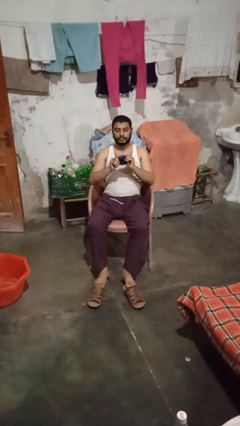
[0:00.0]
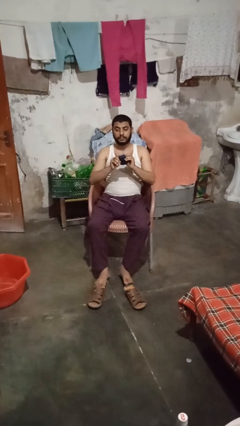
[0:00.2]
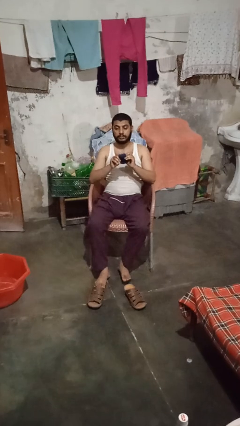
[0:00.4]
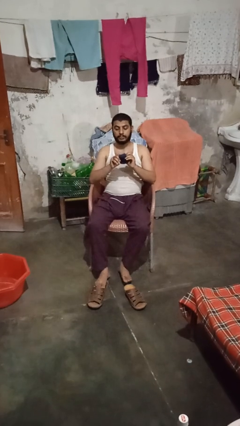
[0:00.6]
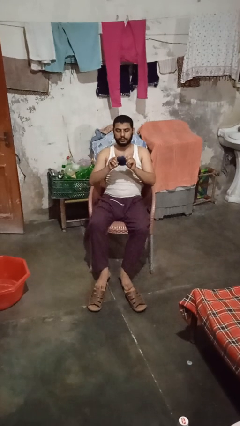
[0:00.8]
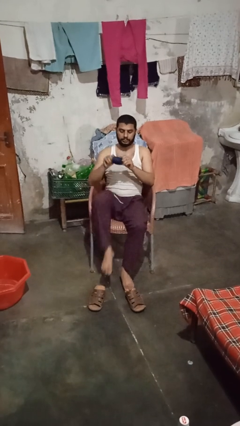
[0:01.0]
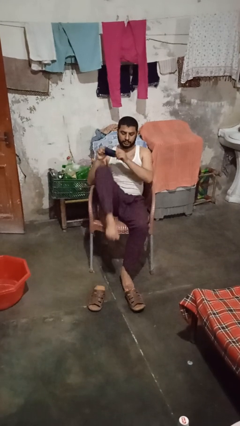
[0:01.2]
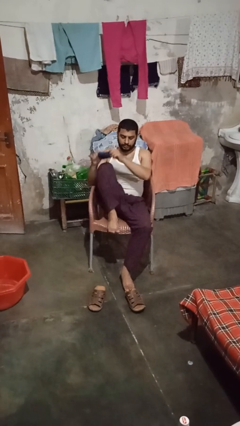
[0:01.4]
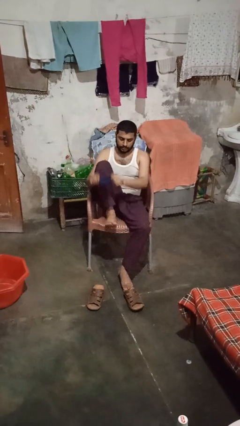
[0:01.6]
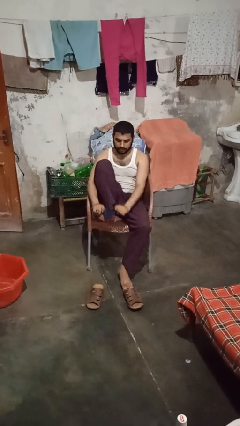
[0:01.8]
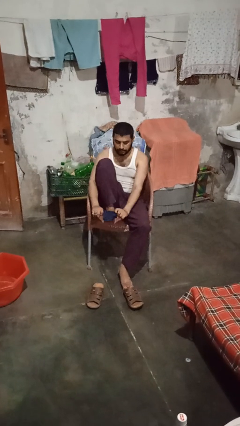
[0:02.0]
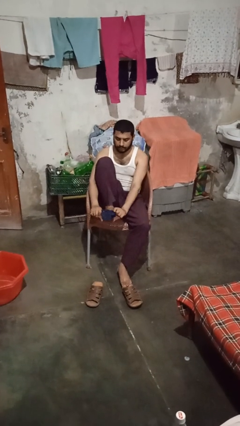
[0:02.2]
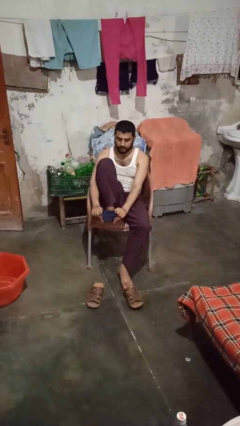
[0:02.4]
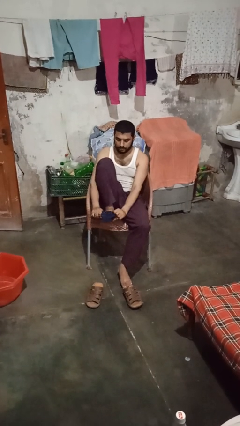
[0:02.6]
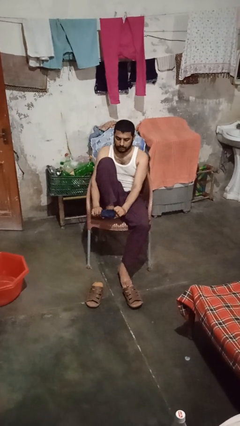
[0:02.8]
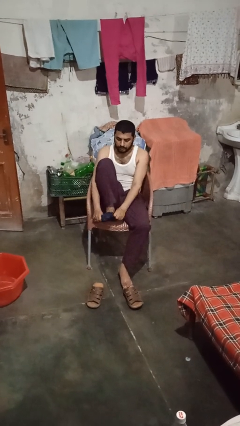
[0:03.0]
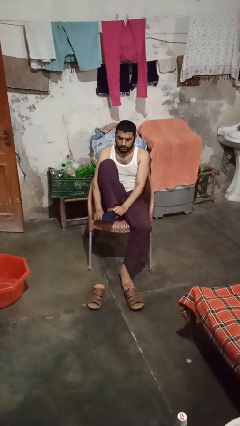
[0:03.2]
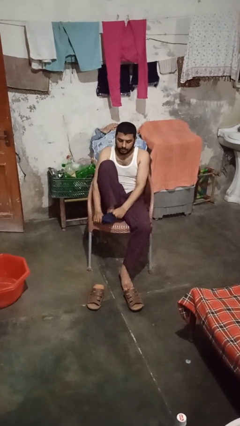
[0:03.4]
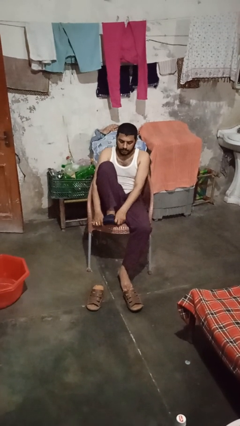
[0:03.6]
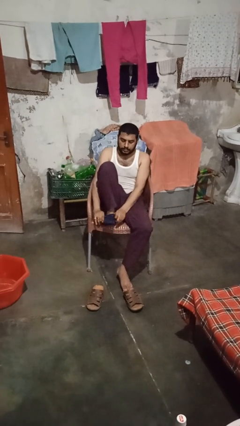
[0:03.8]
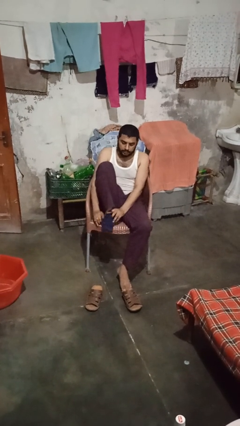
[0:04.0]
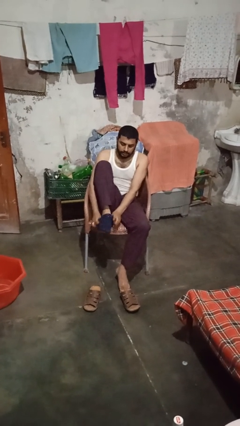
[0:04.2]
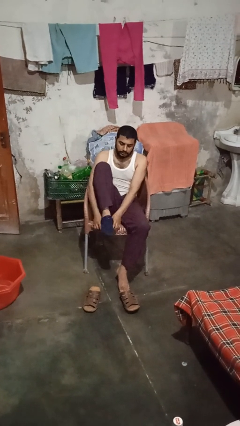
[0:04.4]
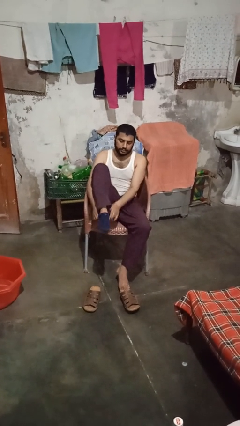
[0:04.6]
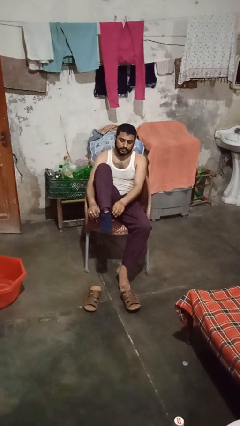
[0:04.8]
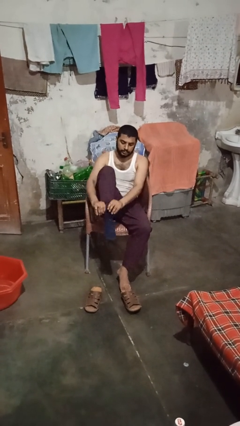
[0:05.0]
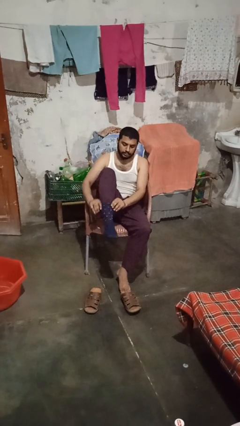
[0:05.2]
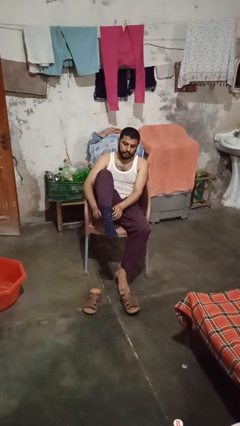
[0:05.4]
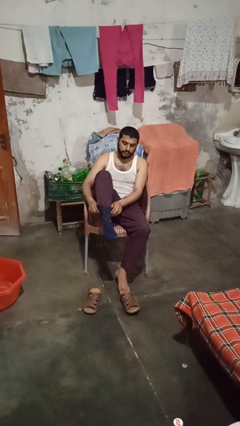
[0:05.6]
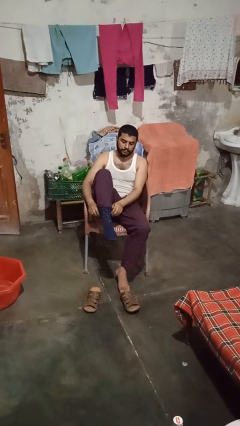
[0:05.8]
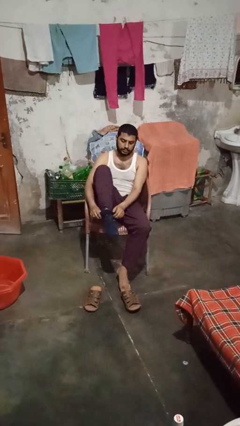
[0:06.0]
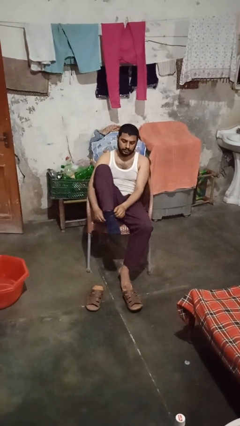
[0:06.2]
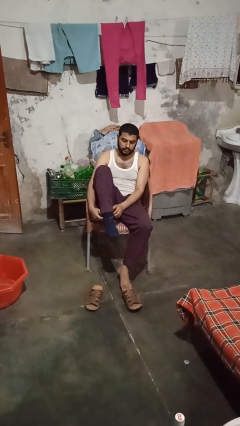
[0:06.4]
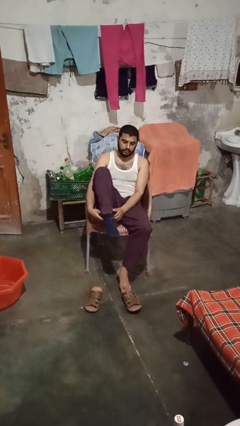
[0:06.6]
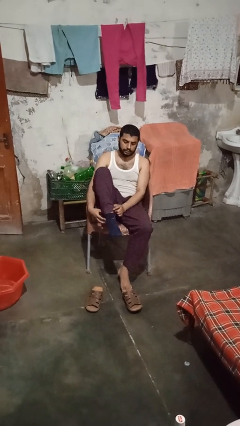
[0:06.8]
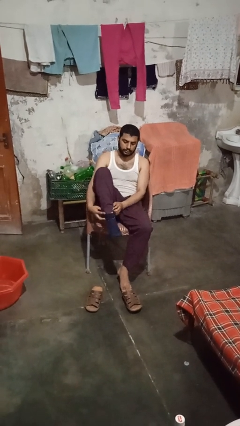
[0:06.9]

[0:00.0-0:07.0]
person puts on socks

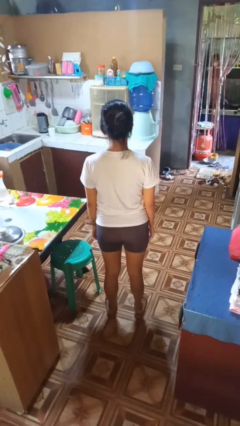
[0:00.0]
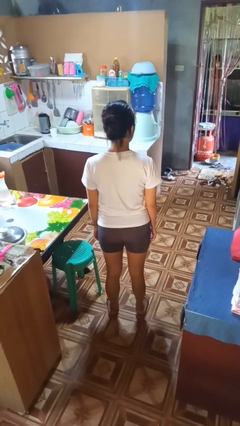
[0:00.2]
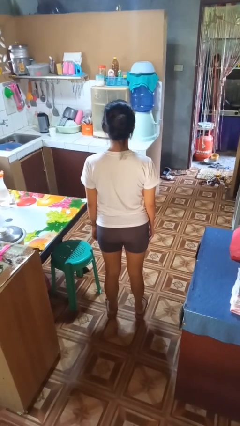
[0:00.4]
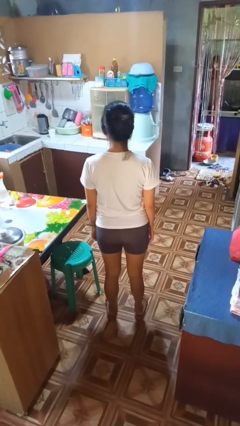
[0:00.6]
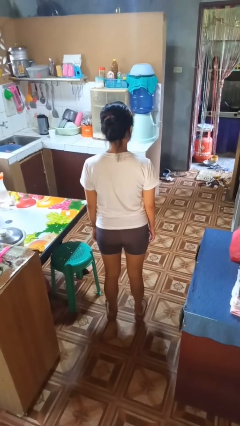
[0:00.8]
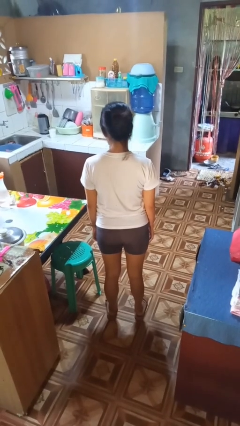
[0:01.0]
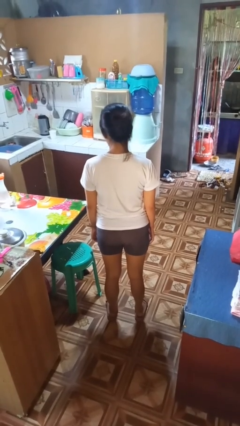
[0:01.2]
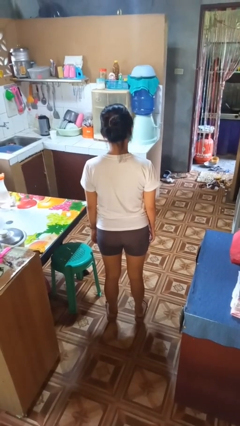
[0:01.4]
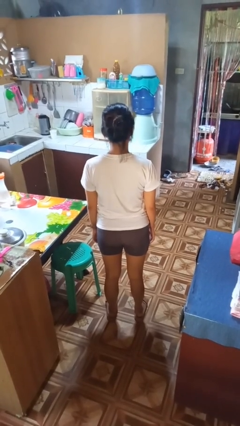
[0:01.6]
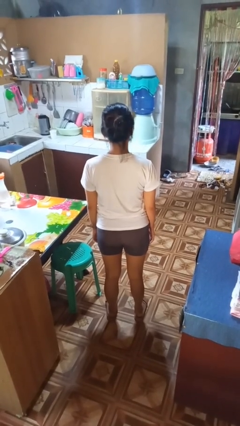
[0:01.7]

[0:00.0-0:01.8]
person shakes head

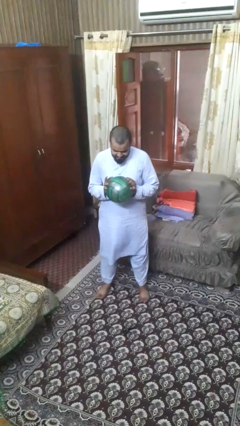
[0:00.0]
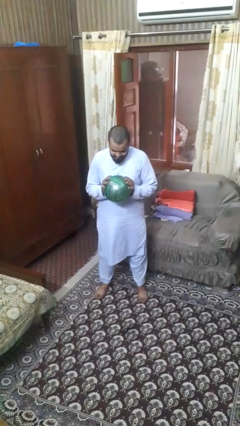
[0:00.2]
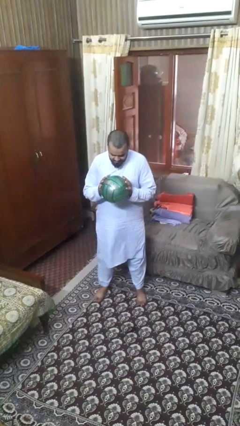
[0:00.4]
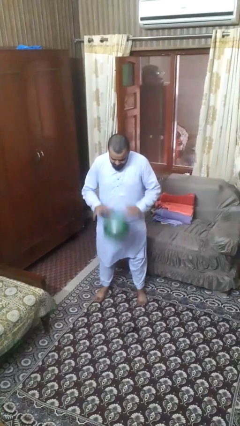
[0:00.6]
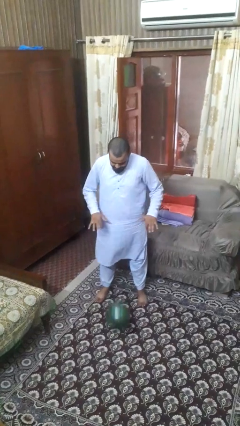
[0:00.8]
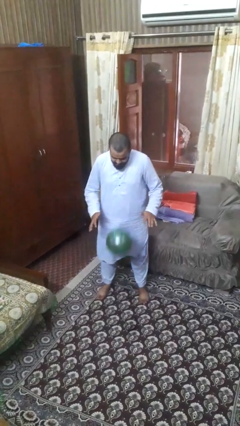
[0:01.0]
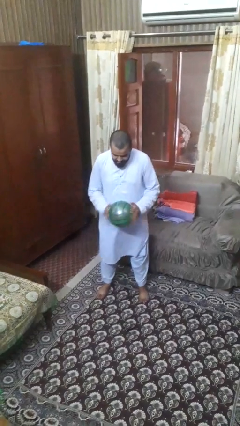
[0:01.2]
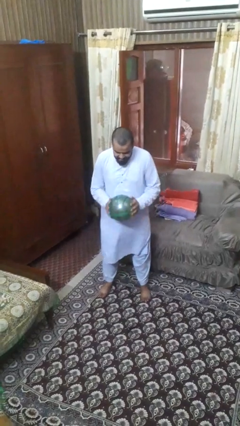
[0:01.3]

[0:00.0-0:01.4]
person bounces ball on floor

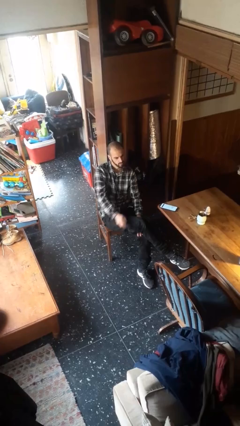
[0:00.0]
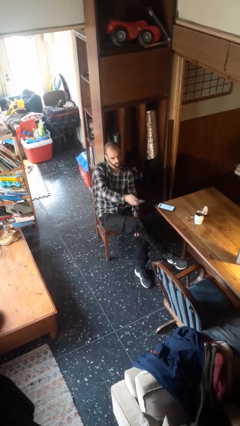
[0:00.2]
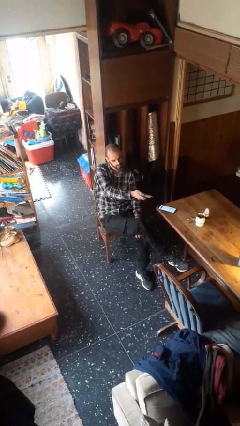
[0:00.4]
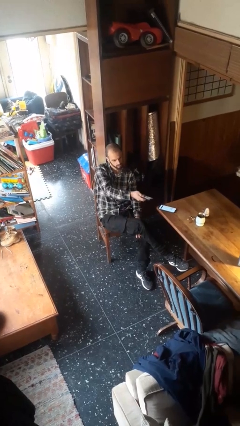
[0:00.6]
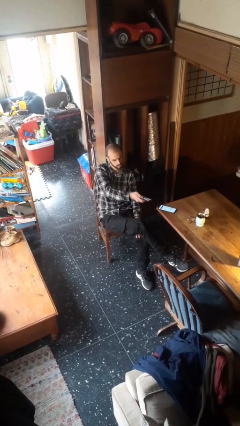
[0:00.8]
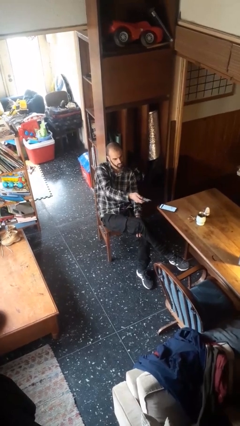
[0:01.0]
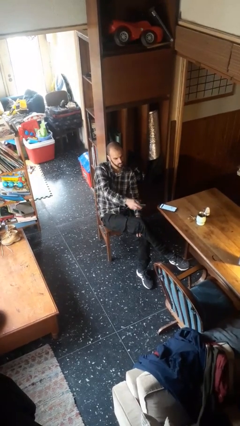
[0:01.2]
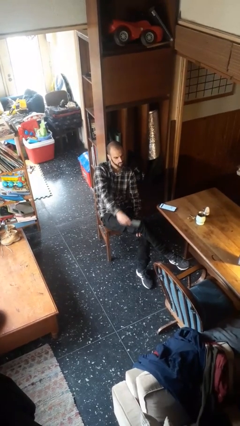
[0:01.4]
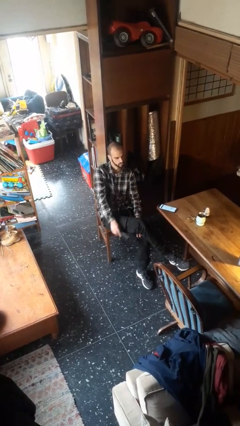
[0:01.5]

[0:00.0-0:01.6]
person uses television remote

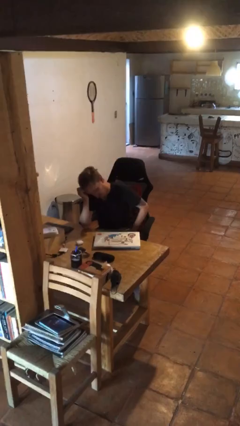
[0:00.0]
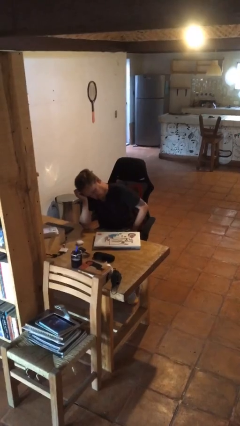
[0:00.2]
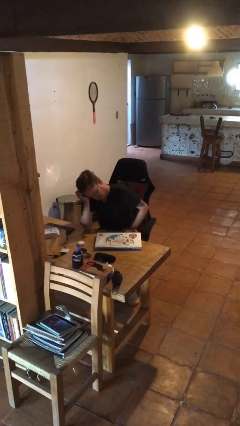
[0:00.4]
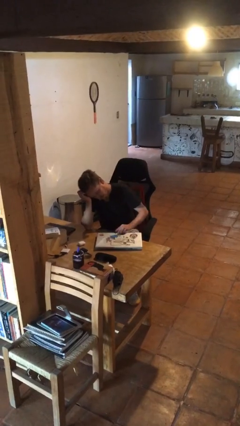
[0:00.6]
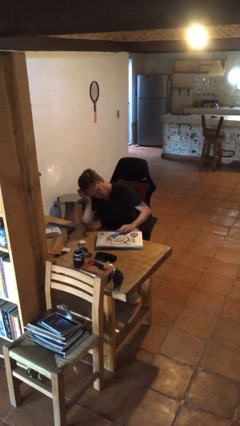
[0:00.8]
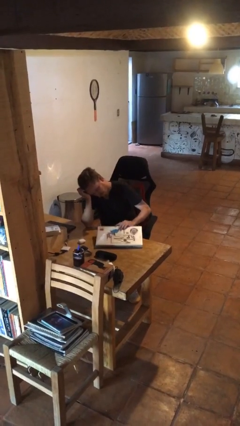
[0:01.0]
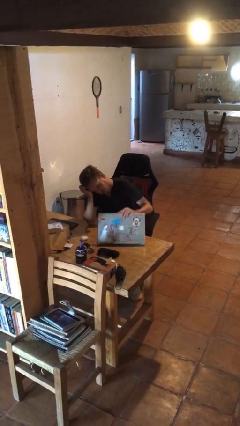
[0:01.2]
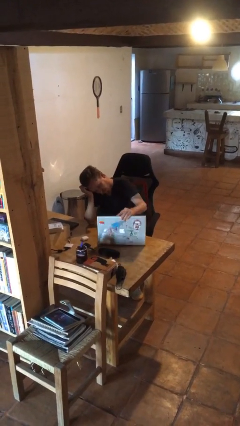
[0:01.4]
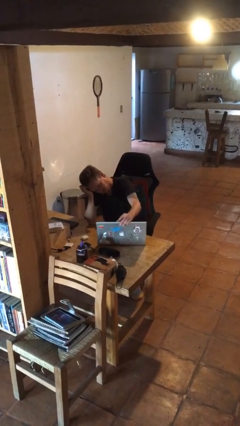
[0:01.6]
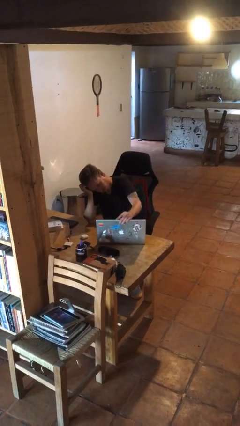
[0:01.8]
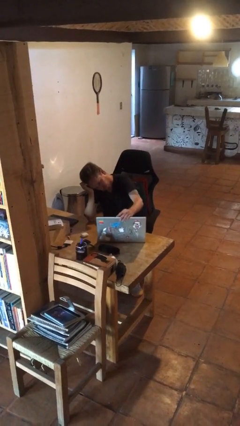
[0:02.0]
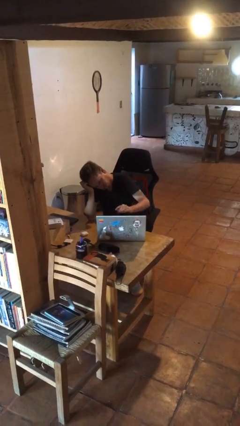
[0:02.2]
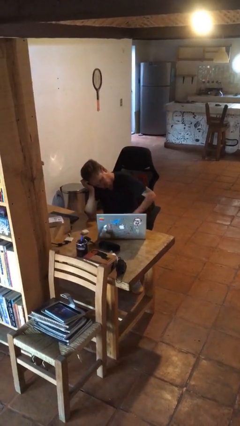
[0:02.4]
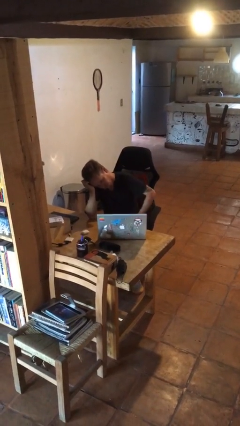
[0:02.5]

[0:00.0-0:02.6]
person opens laptop

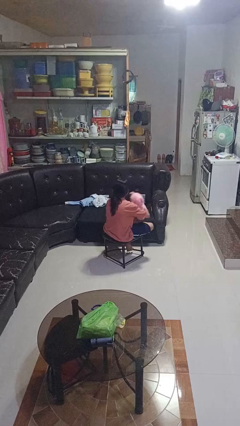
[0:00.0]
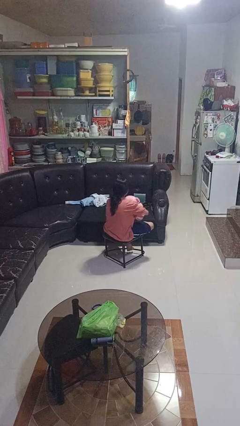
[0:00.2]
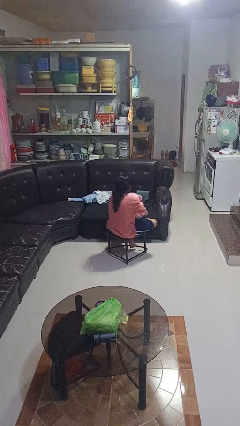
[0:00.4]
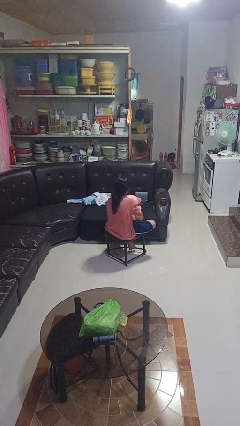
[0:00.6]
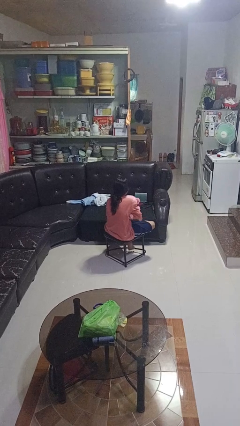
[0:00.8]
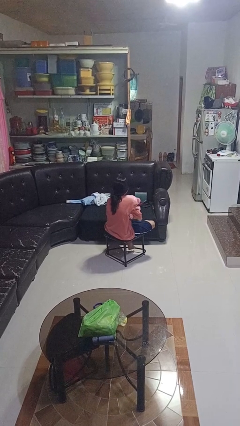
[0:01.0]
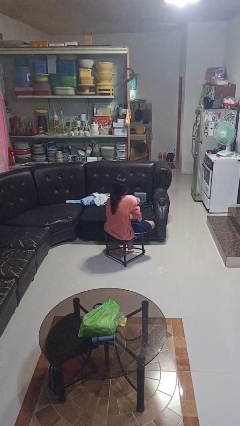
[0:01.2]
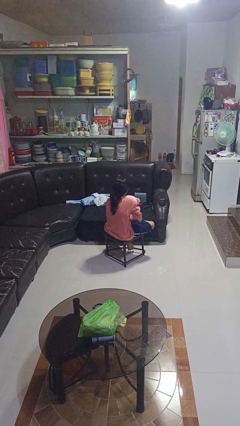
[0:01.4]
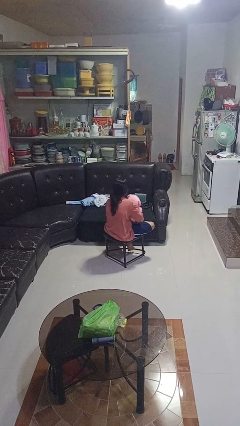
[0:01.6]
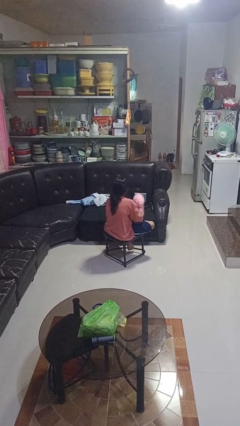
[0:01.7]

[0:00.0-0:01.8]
person hugs stuffed animal

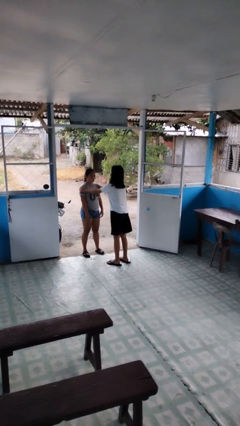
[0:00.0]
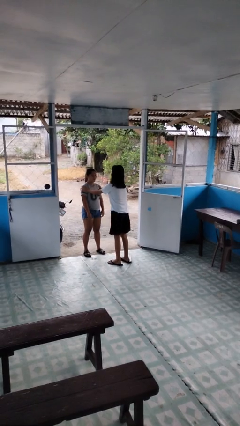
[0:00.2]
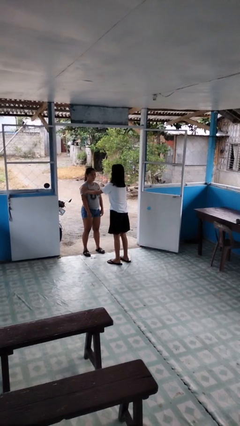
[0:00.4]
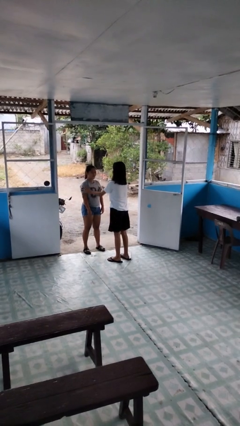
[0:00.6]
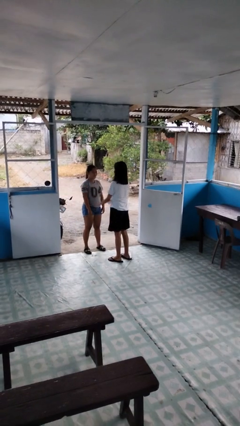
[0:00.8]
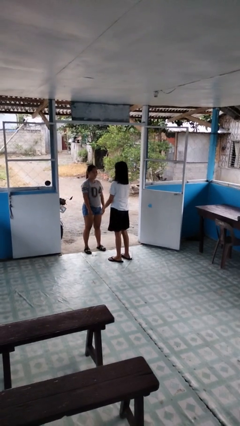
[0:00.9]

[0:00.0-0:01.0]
person pounds shoulders of person
